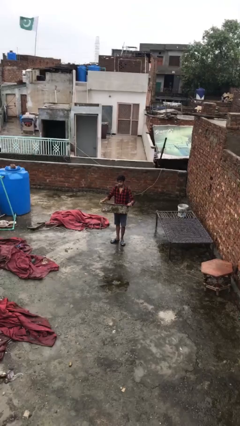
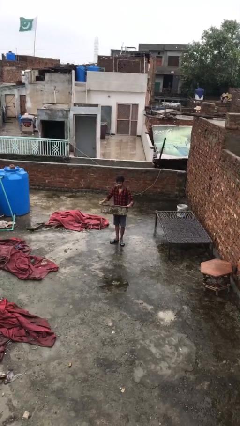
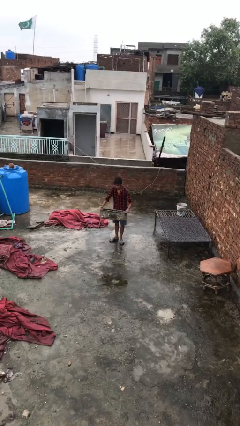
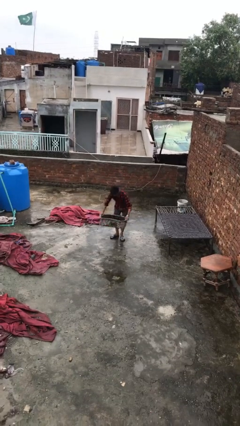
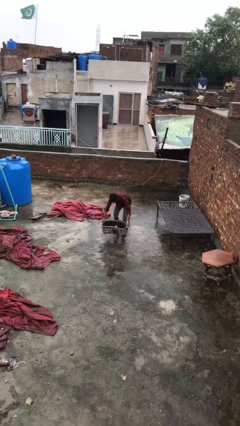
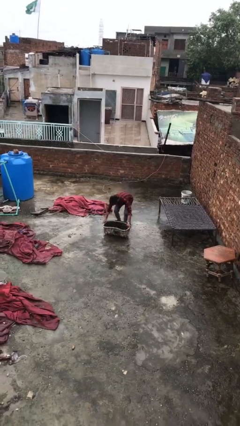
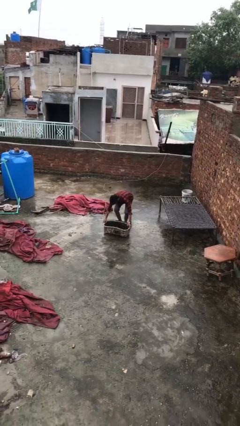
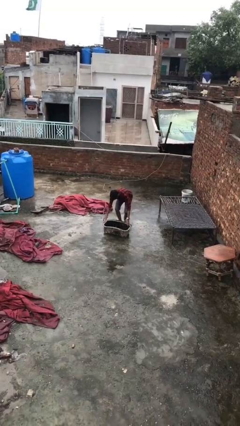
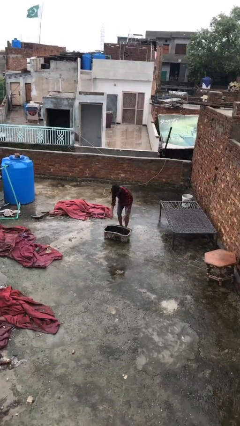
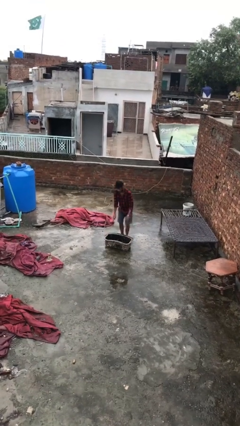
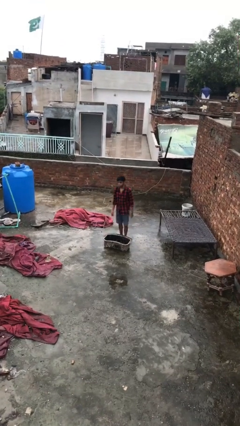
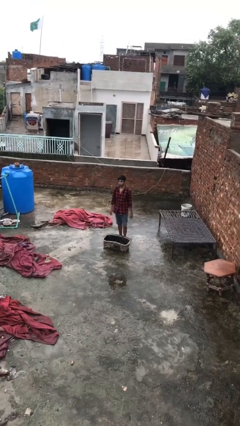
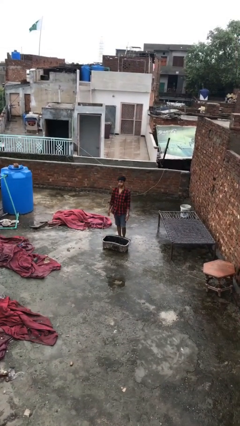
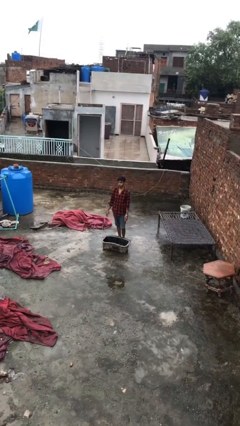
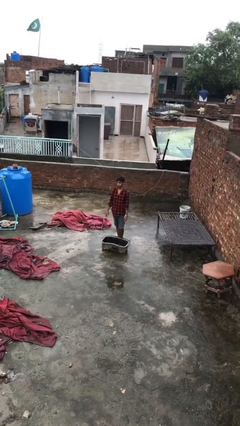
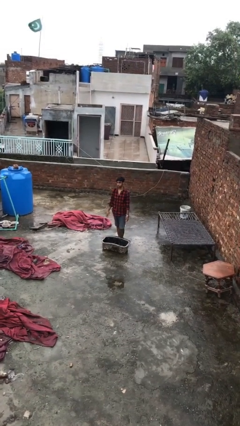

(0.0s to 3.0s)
person puts down object on floor

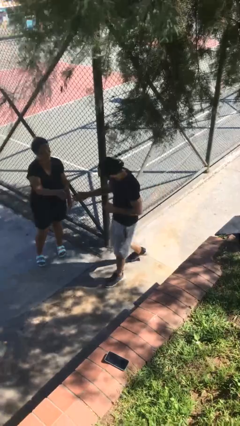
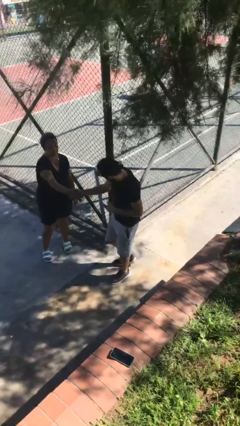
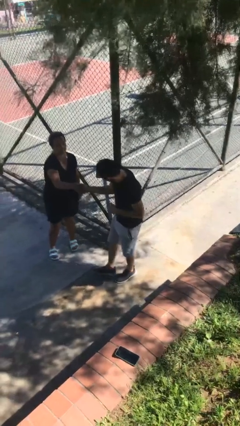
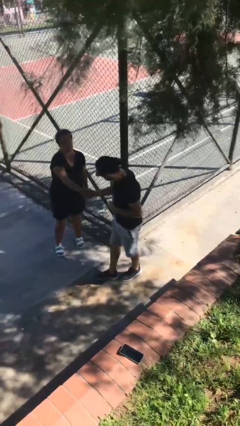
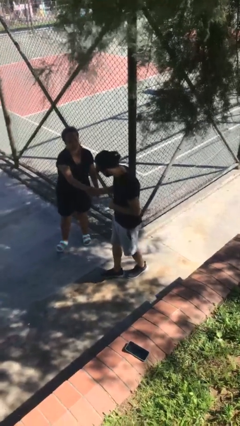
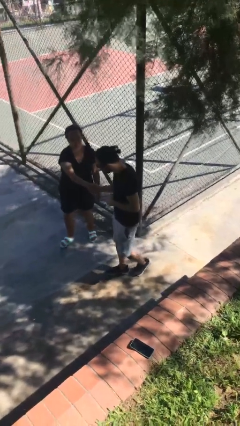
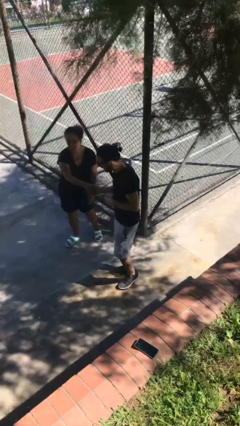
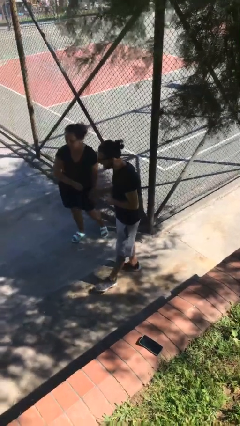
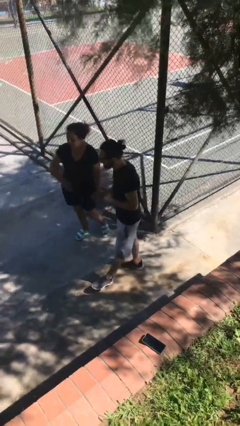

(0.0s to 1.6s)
person shakes hand

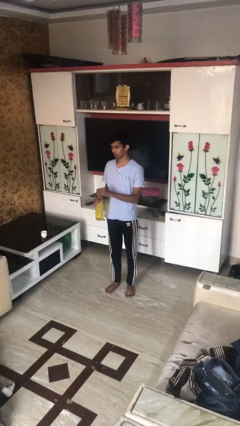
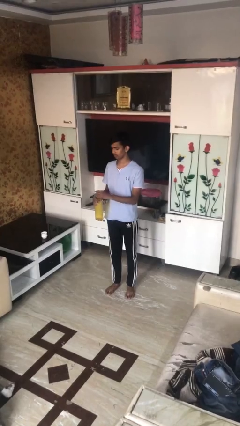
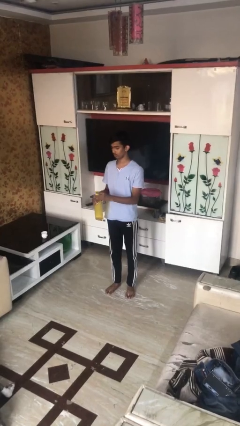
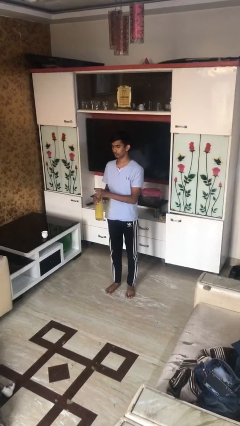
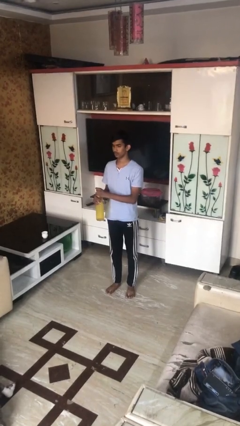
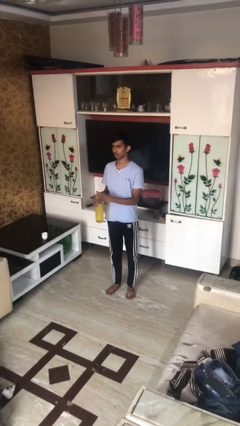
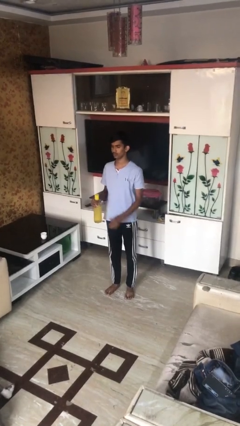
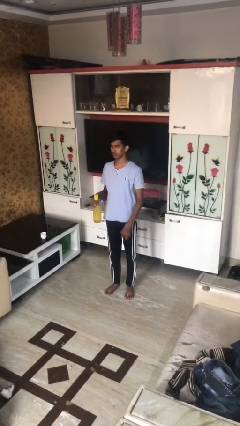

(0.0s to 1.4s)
person screws lid to bottle

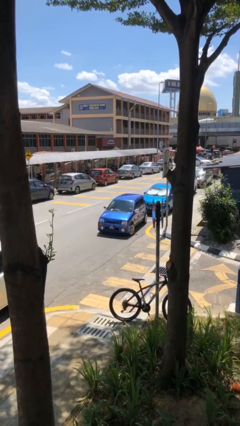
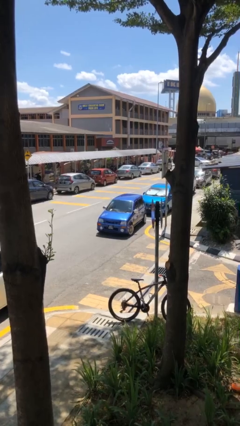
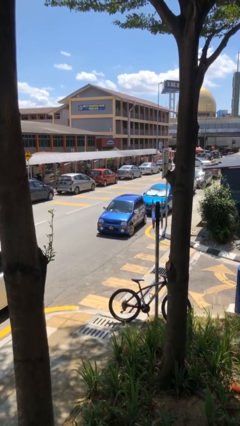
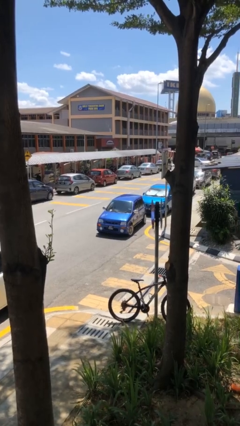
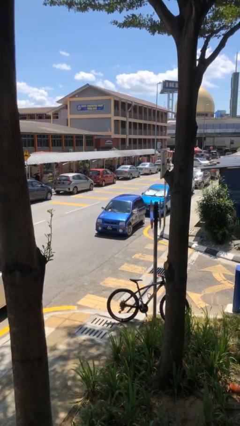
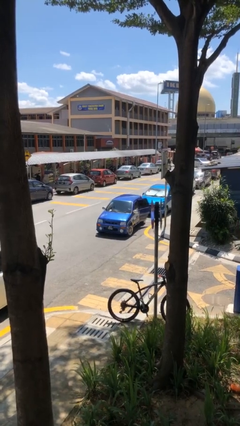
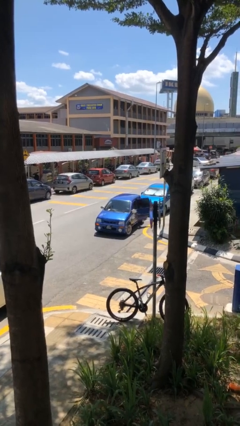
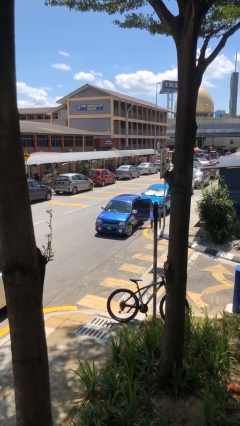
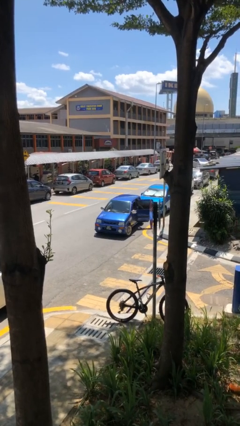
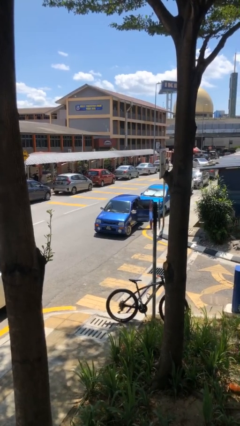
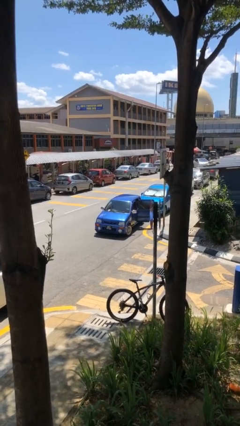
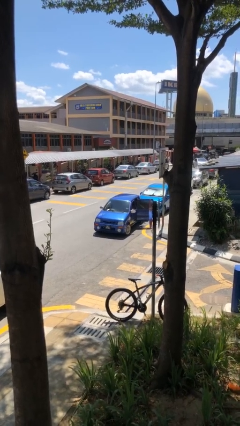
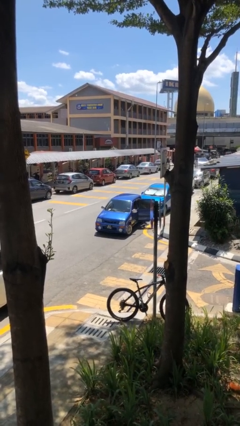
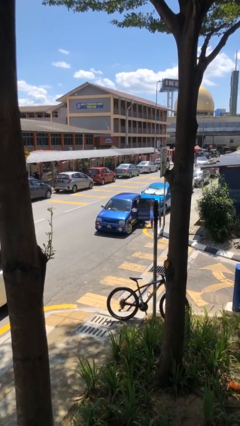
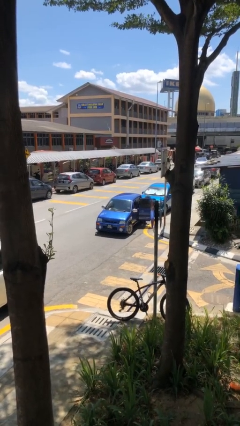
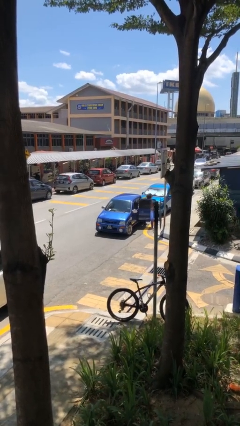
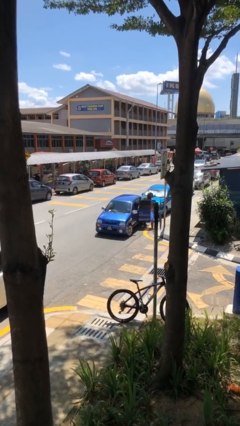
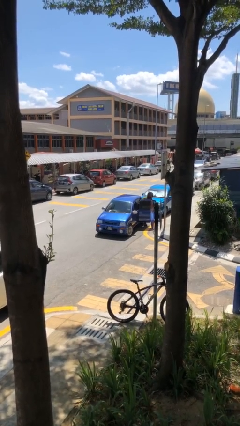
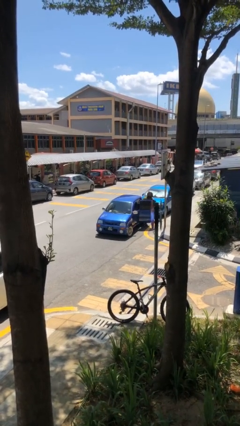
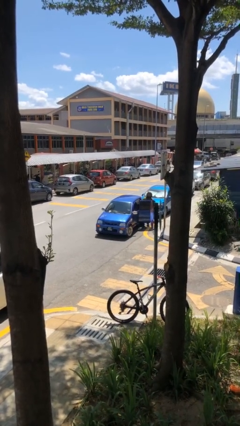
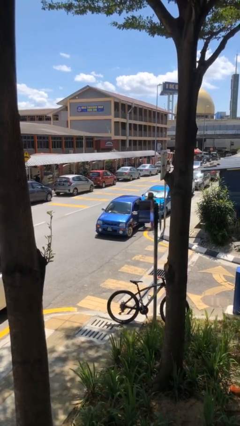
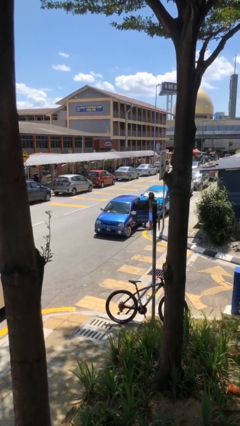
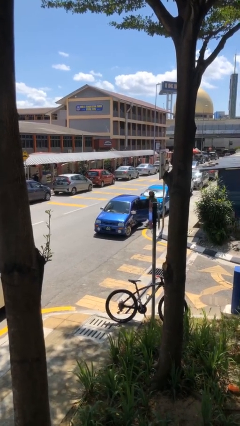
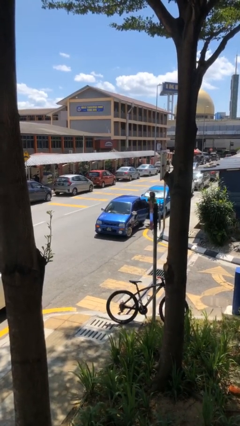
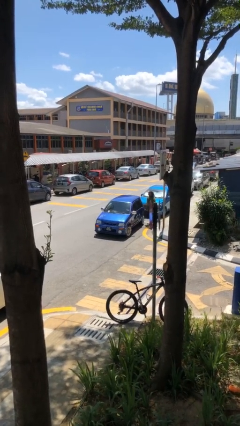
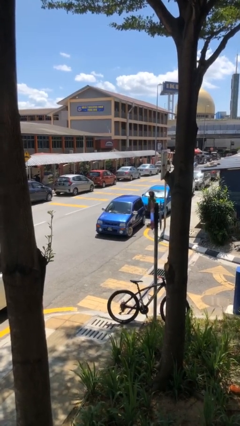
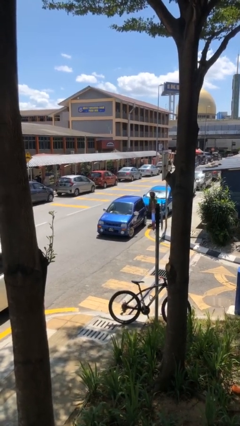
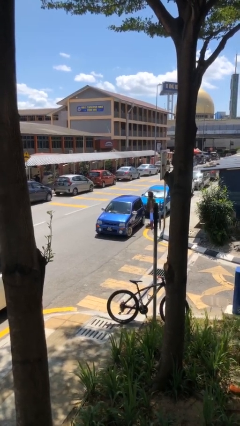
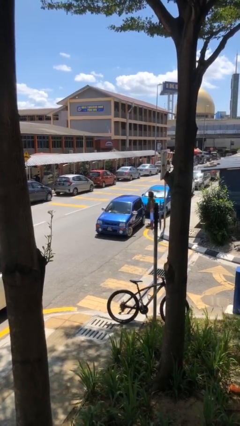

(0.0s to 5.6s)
car drops off person

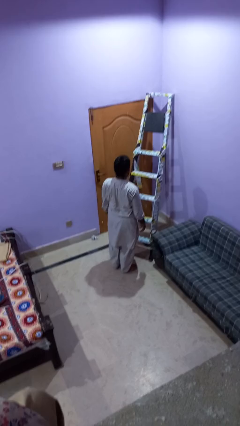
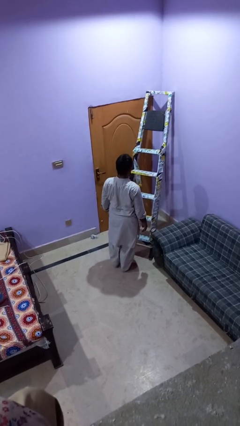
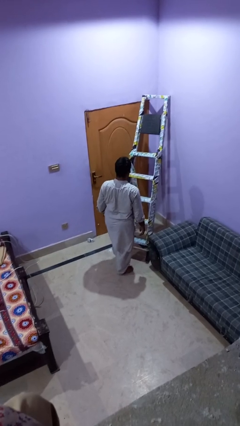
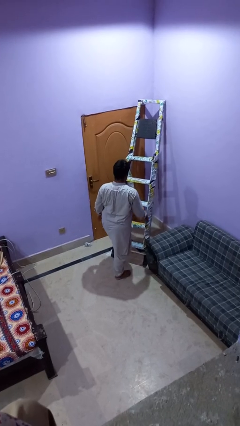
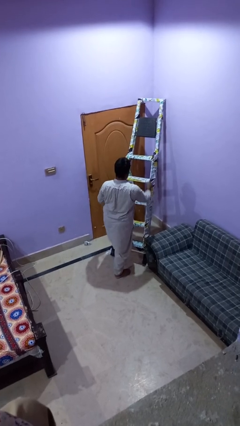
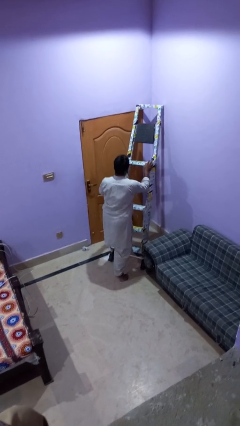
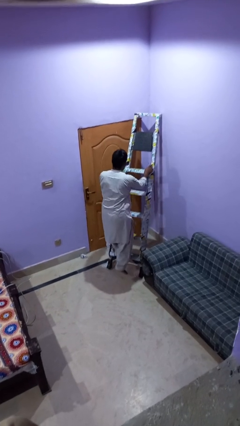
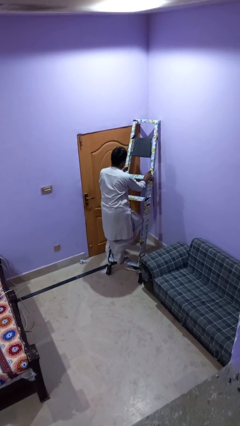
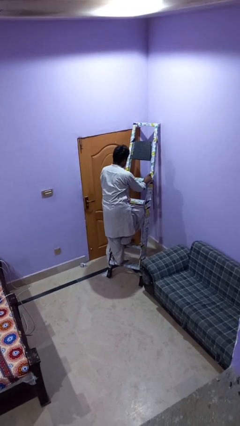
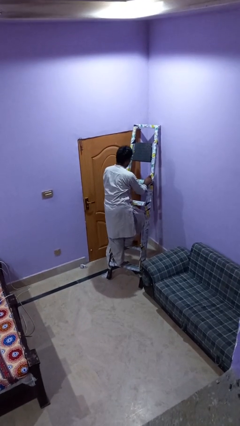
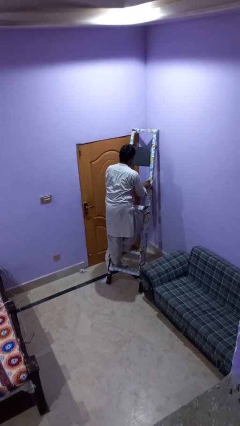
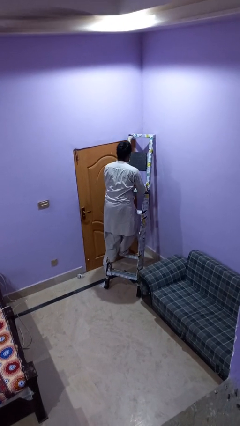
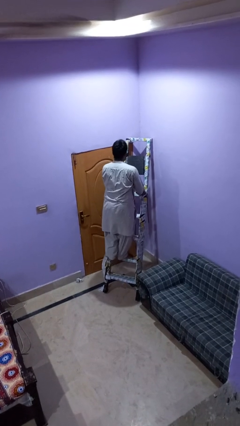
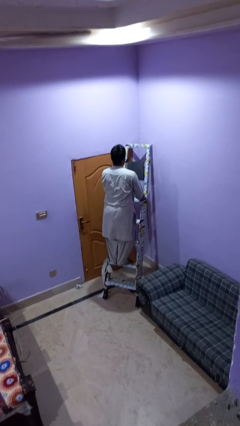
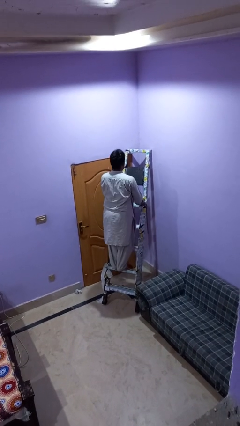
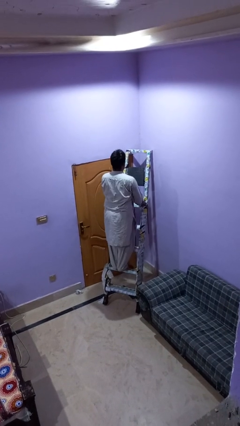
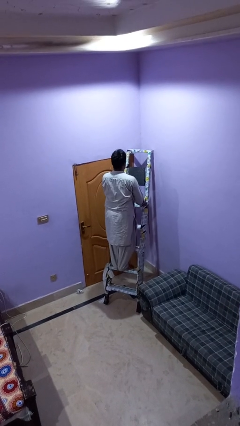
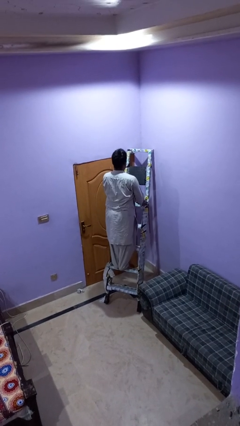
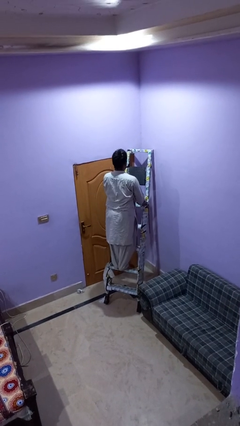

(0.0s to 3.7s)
person climbs on chair

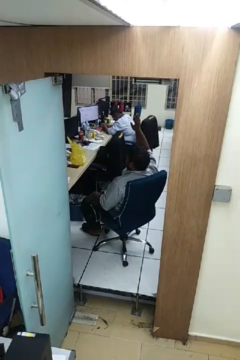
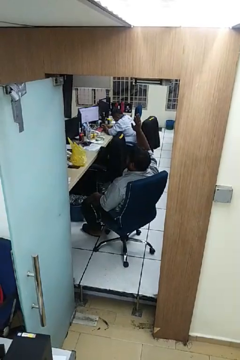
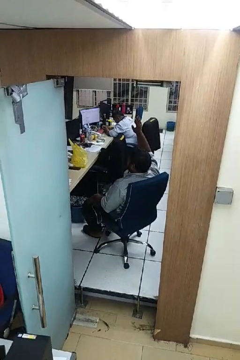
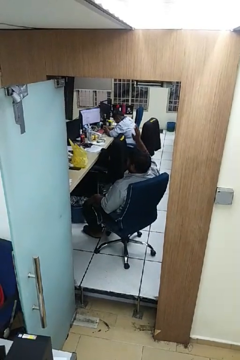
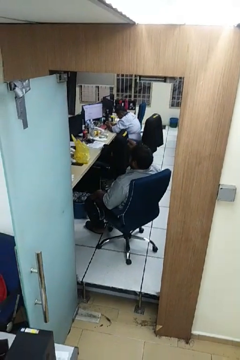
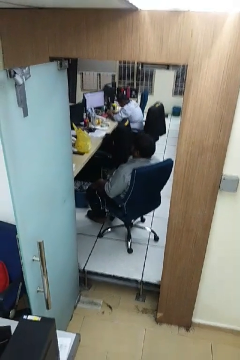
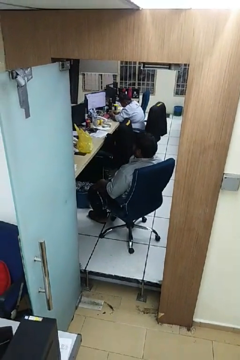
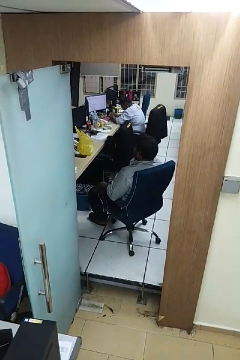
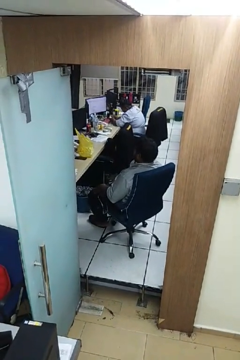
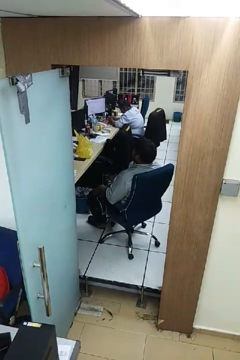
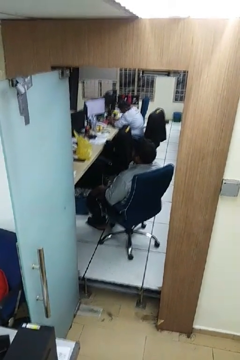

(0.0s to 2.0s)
person gestures lower hand

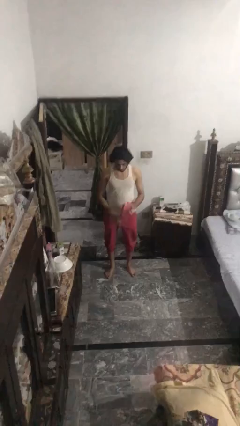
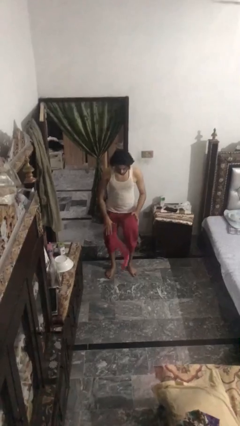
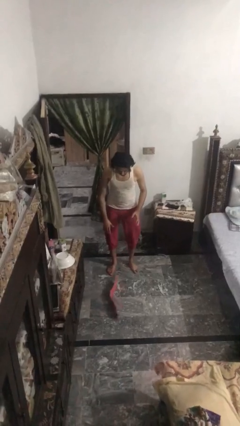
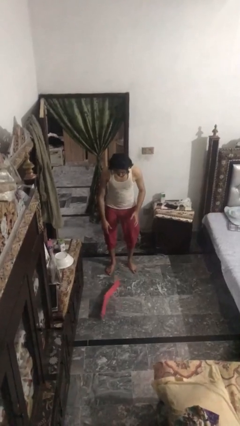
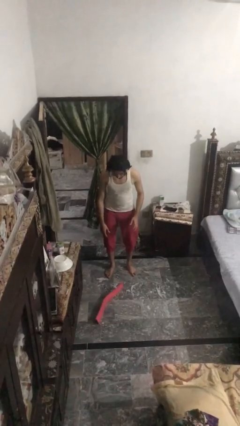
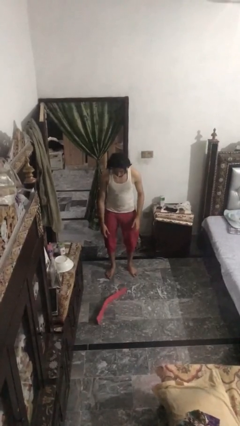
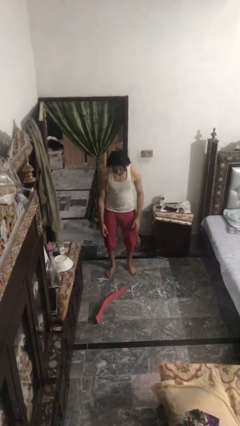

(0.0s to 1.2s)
person drops object
